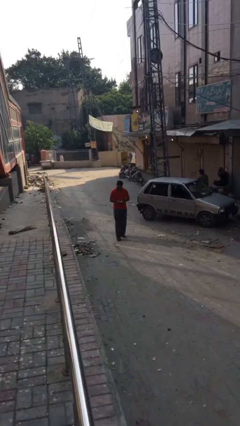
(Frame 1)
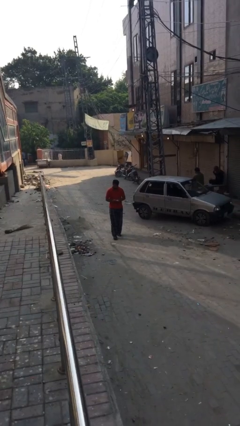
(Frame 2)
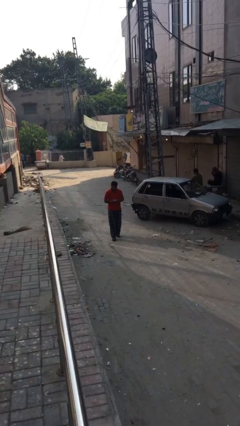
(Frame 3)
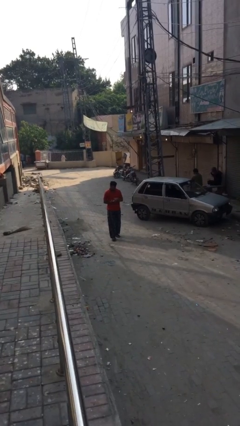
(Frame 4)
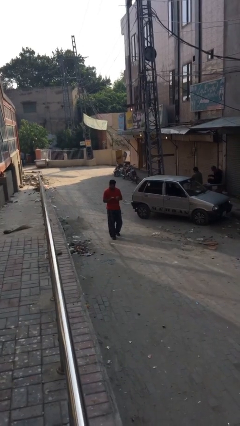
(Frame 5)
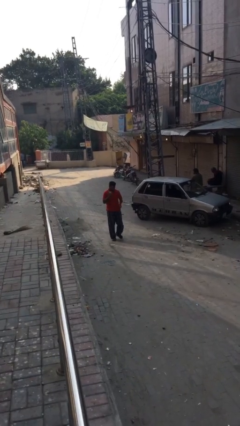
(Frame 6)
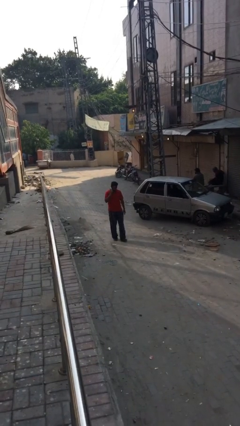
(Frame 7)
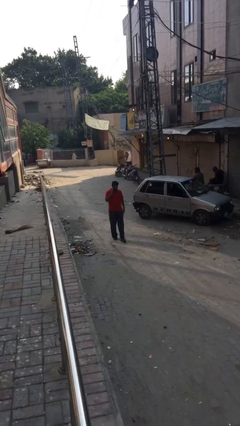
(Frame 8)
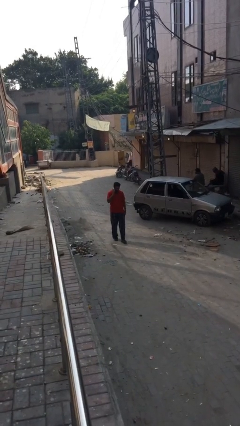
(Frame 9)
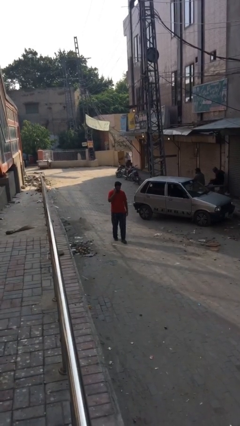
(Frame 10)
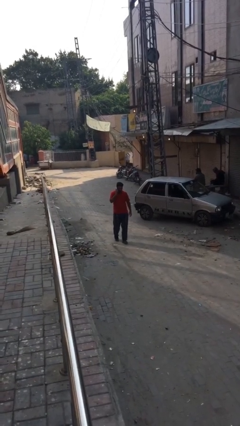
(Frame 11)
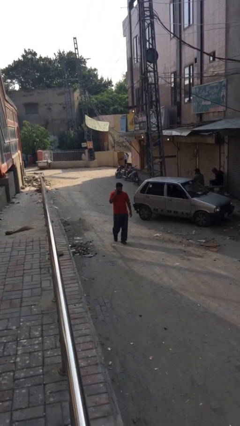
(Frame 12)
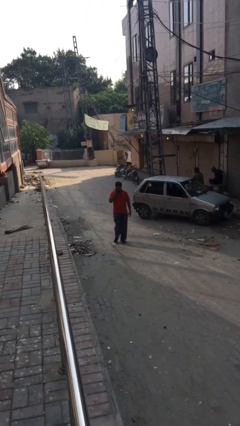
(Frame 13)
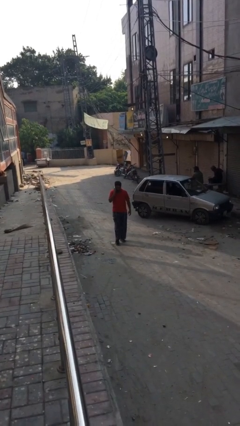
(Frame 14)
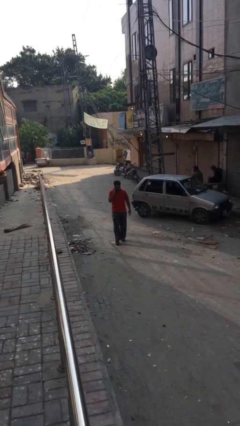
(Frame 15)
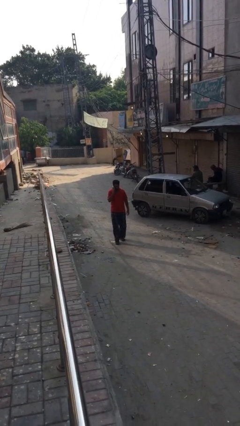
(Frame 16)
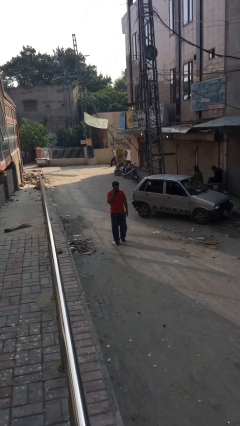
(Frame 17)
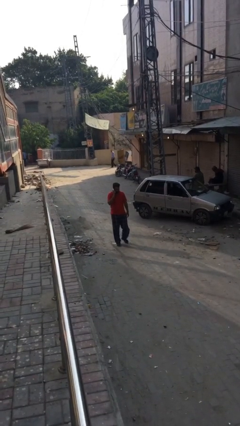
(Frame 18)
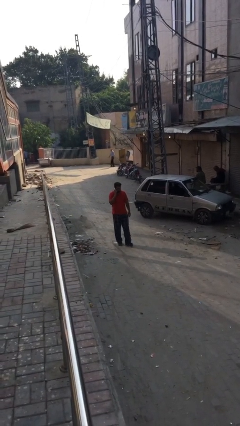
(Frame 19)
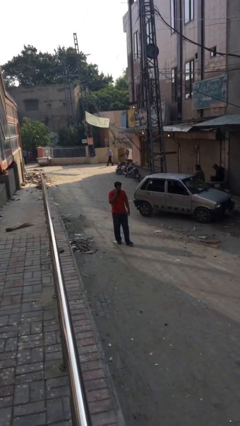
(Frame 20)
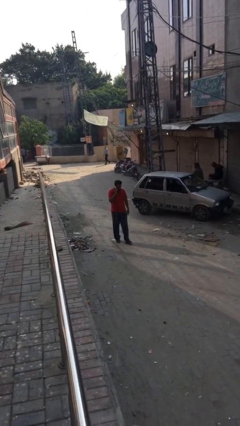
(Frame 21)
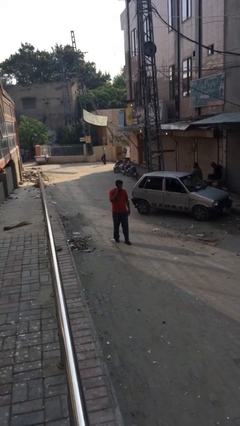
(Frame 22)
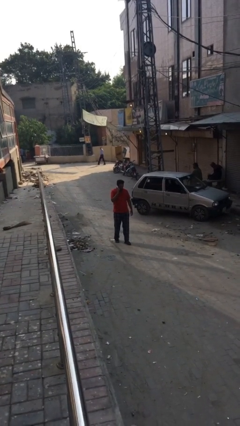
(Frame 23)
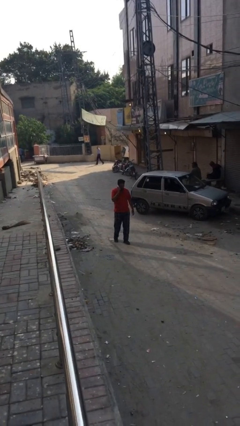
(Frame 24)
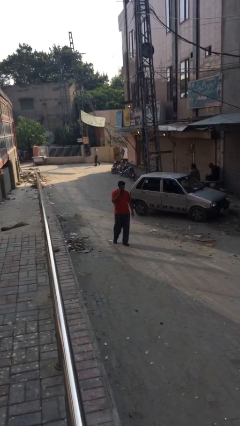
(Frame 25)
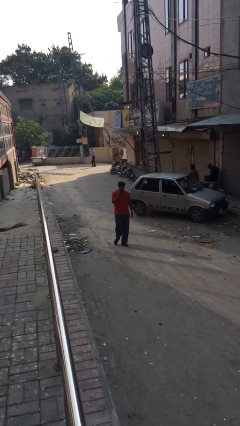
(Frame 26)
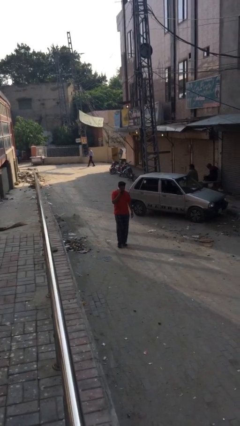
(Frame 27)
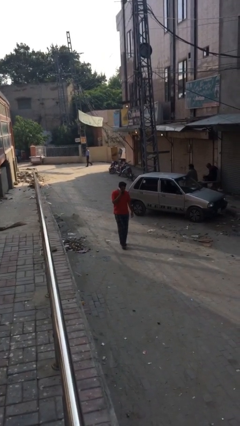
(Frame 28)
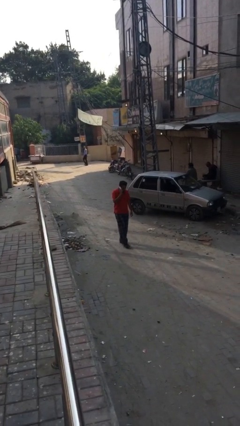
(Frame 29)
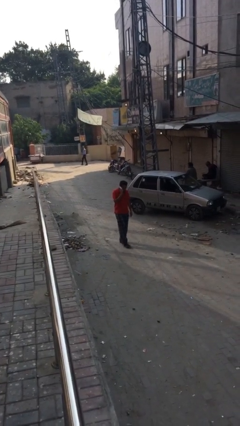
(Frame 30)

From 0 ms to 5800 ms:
person talks on phone

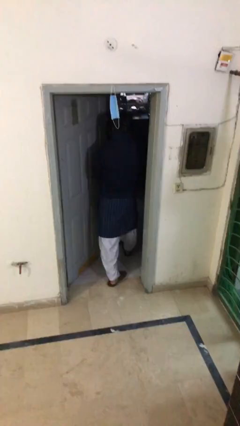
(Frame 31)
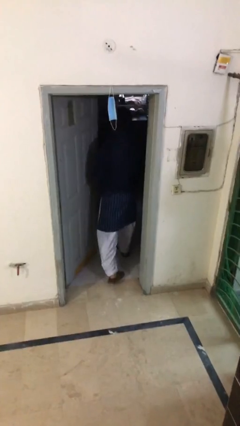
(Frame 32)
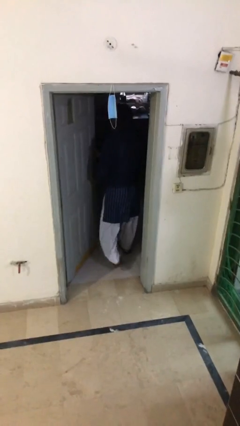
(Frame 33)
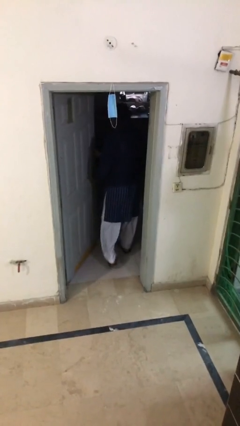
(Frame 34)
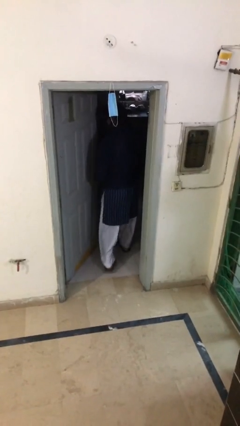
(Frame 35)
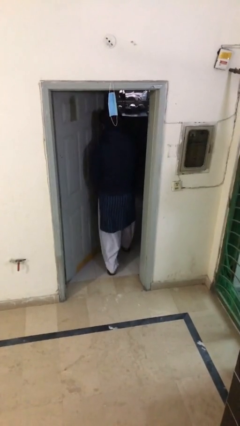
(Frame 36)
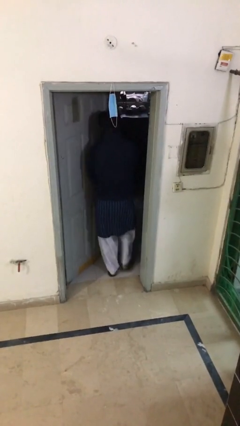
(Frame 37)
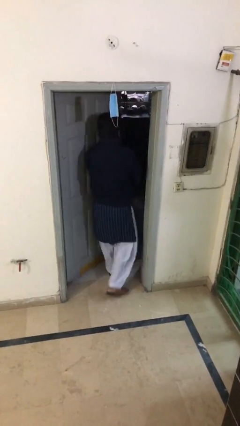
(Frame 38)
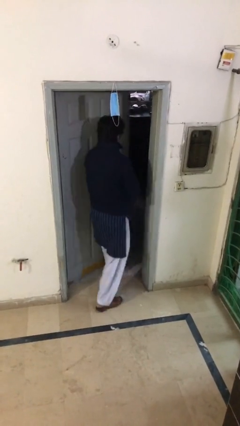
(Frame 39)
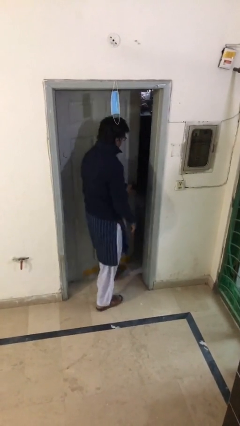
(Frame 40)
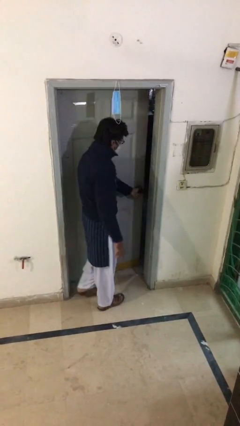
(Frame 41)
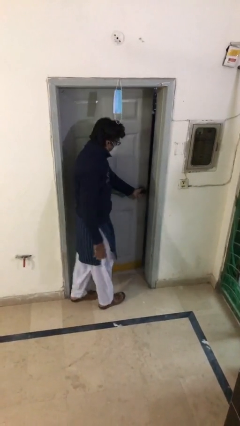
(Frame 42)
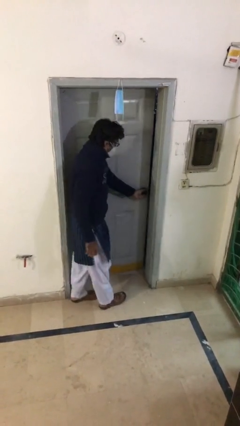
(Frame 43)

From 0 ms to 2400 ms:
person closes facility door

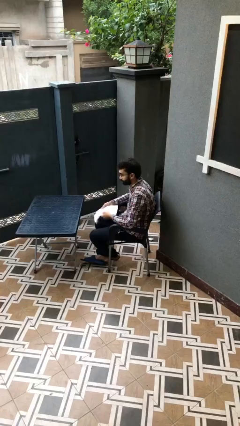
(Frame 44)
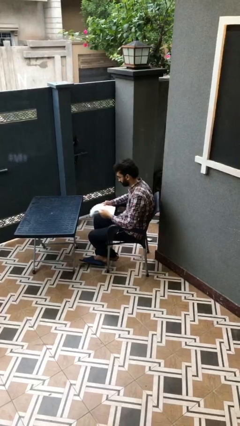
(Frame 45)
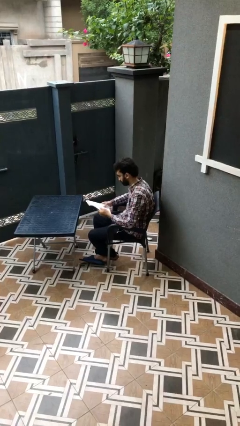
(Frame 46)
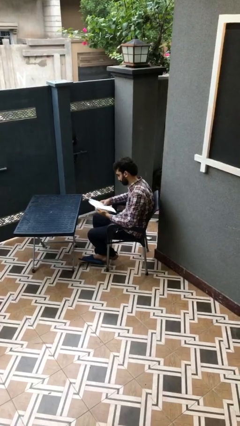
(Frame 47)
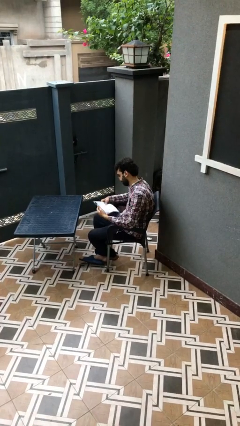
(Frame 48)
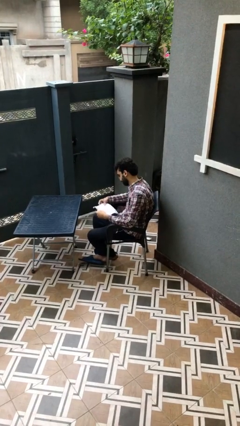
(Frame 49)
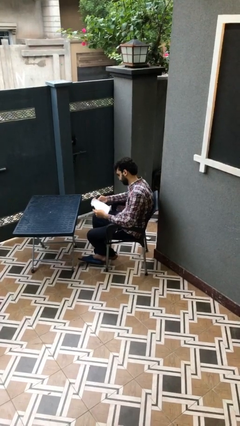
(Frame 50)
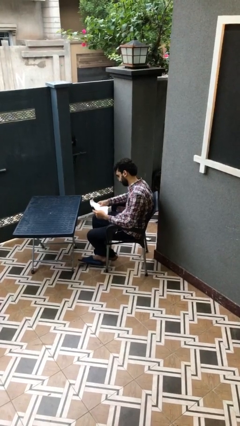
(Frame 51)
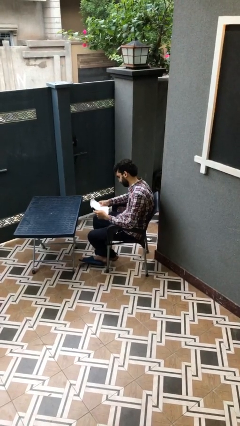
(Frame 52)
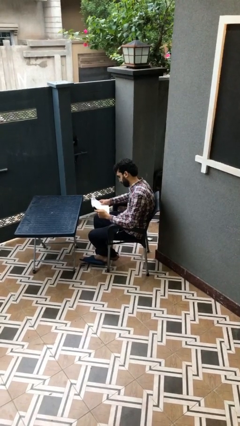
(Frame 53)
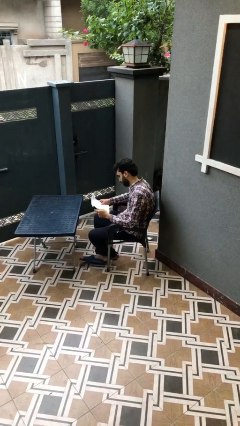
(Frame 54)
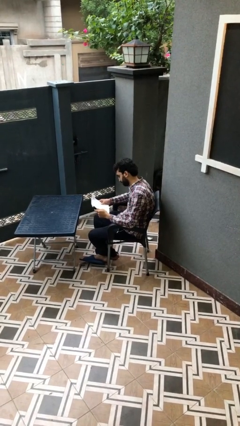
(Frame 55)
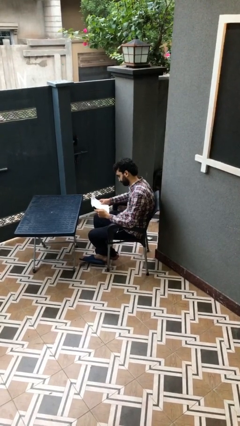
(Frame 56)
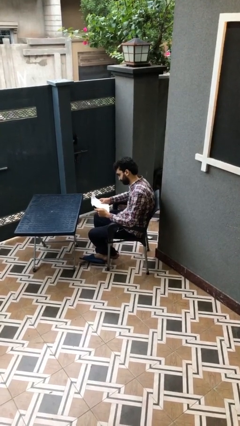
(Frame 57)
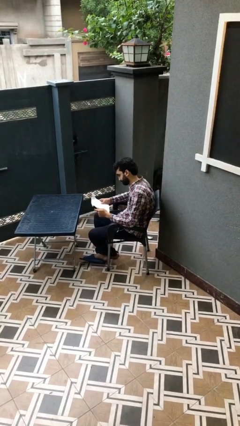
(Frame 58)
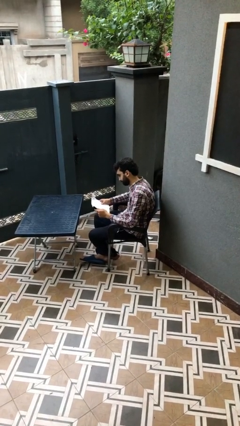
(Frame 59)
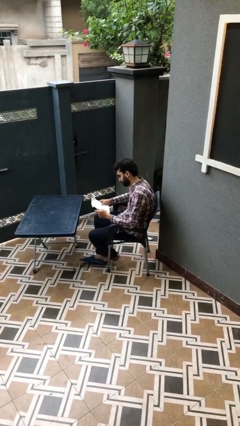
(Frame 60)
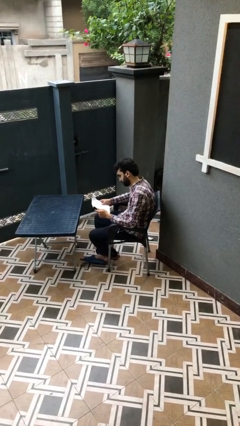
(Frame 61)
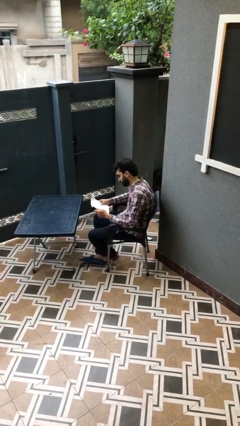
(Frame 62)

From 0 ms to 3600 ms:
person reads document

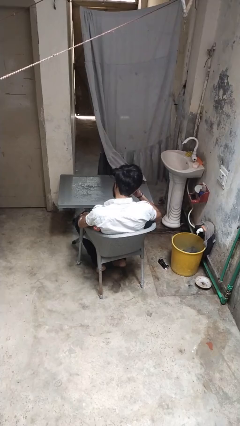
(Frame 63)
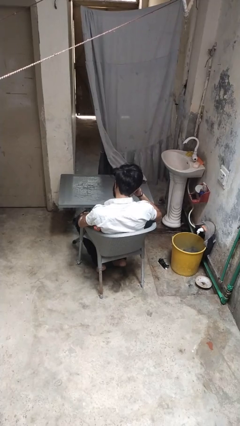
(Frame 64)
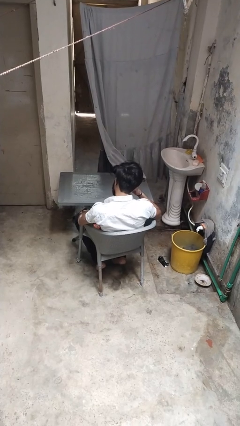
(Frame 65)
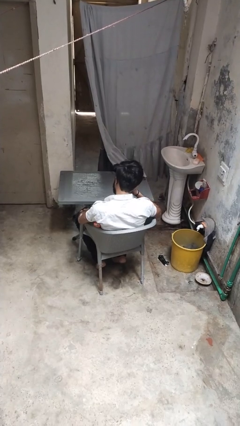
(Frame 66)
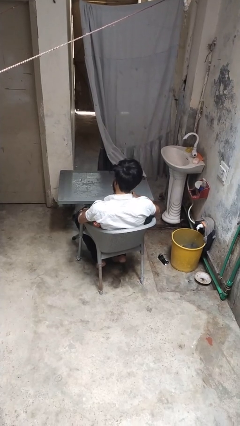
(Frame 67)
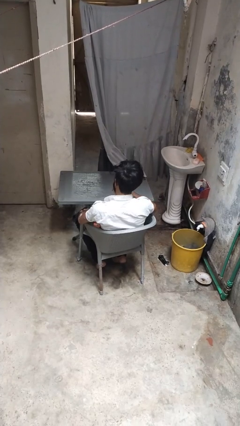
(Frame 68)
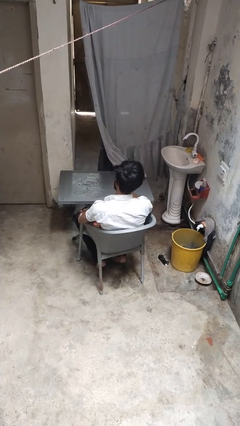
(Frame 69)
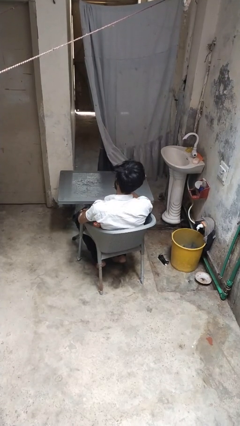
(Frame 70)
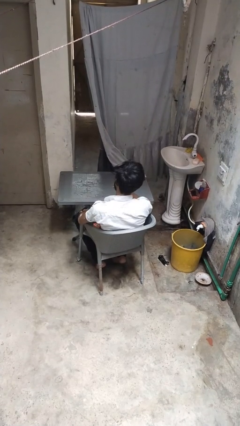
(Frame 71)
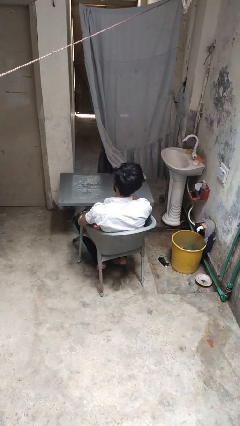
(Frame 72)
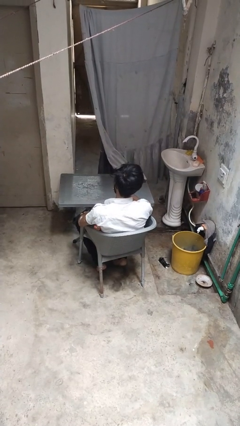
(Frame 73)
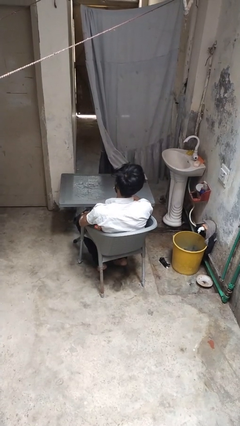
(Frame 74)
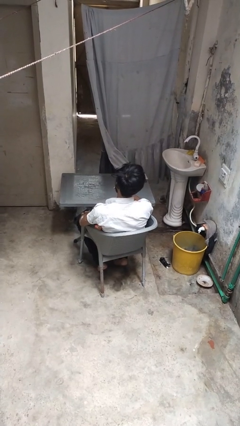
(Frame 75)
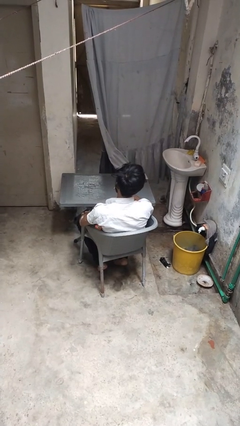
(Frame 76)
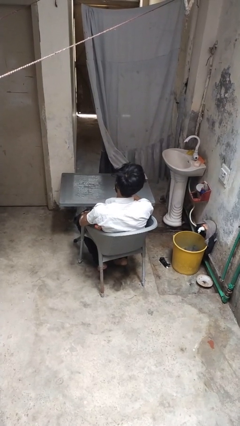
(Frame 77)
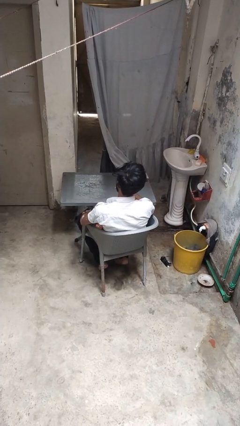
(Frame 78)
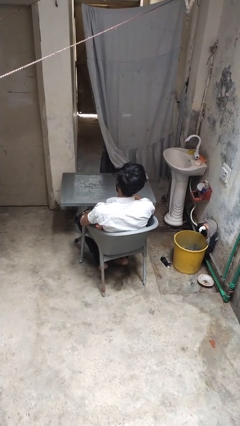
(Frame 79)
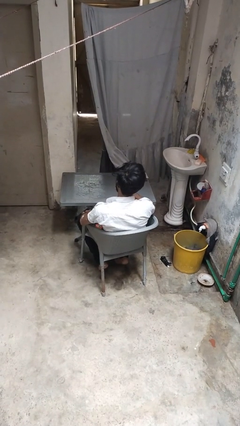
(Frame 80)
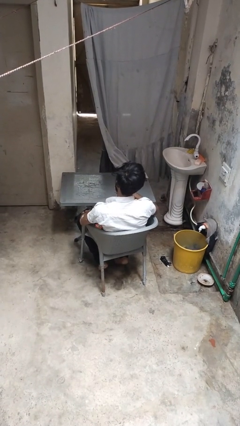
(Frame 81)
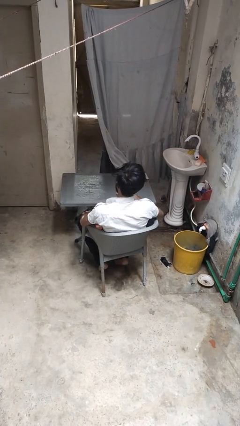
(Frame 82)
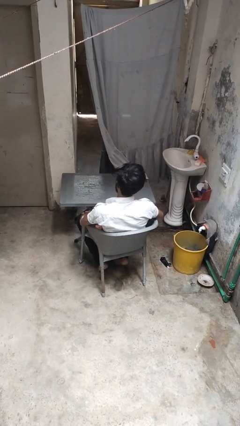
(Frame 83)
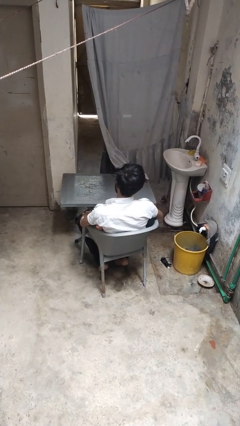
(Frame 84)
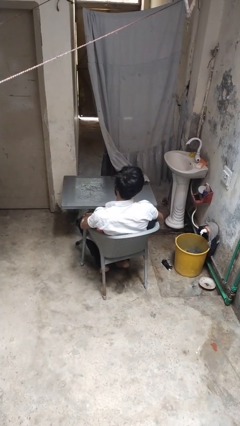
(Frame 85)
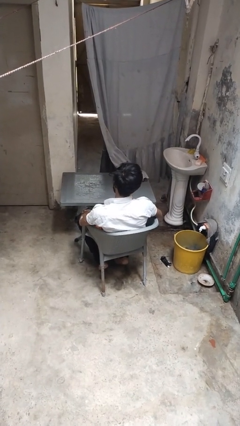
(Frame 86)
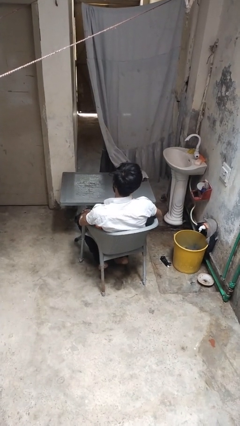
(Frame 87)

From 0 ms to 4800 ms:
person licks fingers

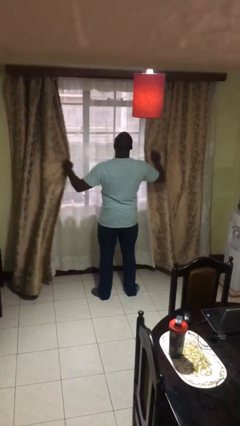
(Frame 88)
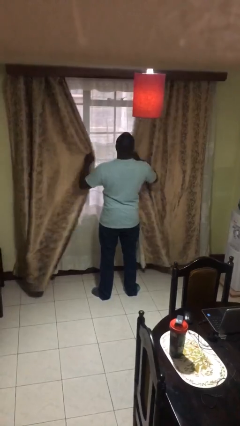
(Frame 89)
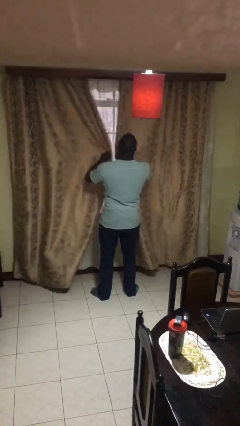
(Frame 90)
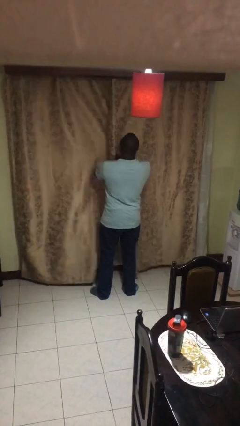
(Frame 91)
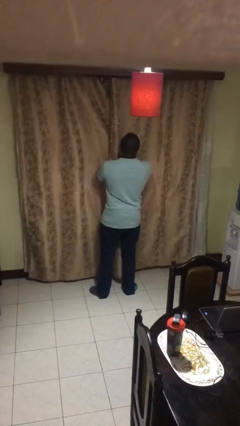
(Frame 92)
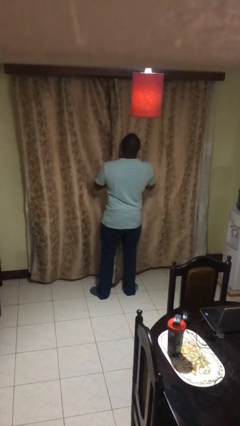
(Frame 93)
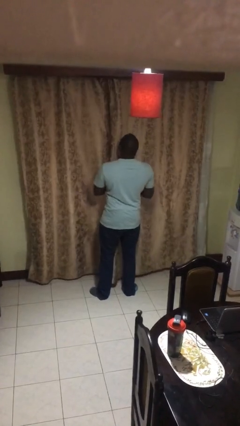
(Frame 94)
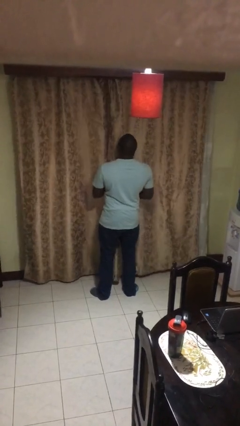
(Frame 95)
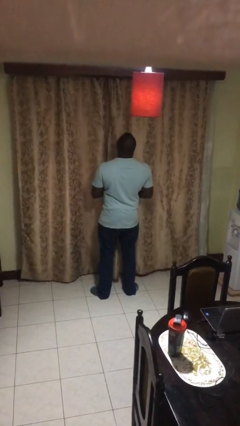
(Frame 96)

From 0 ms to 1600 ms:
person closes curtains
